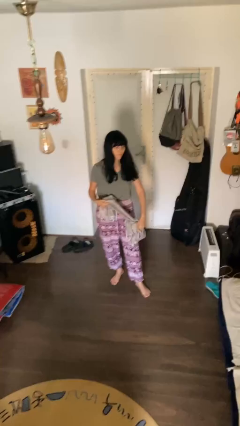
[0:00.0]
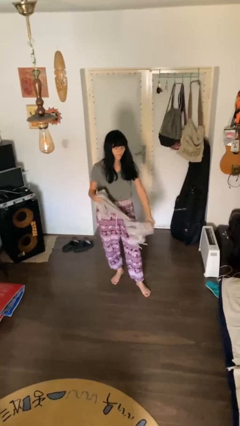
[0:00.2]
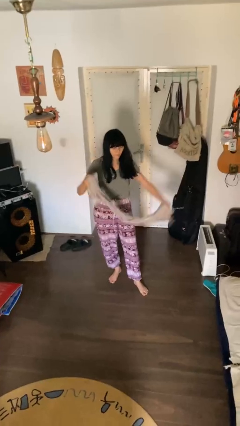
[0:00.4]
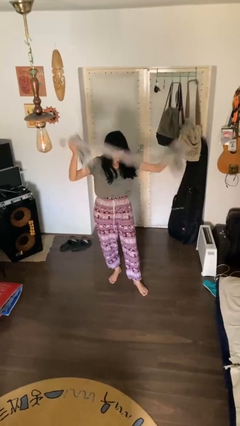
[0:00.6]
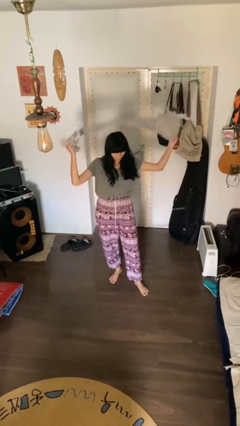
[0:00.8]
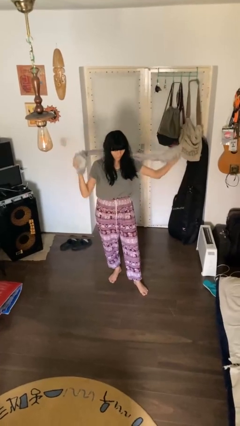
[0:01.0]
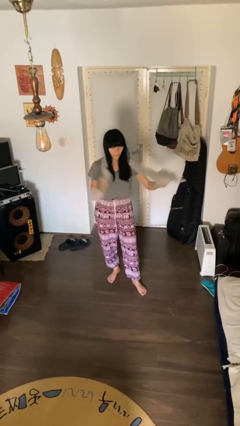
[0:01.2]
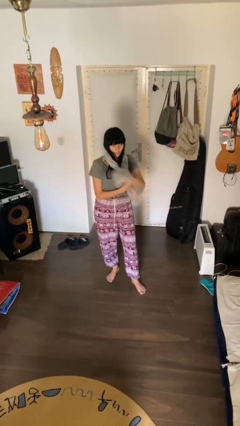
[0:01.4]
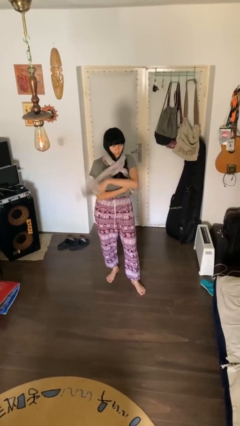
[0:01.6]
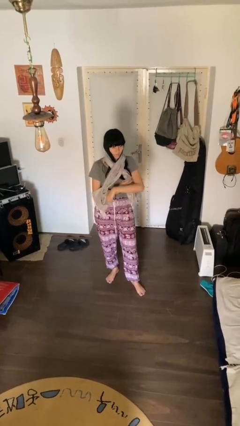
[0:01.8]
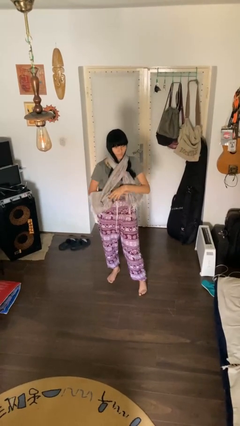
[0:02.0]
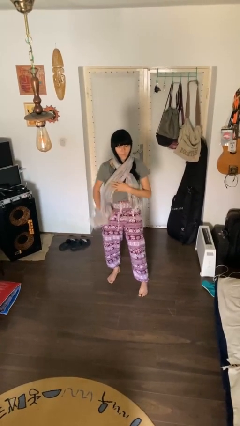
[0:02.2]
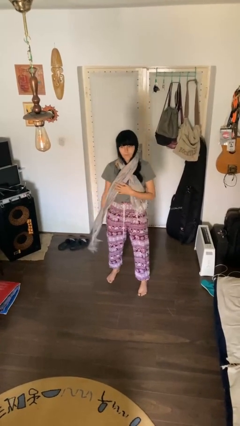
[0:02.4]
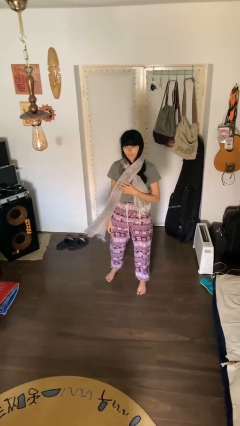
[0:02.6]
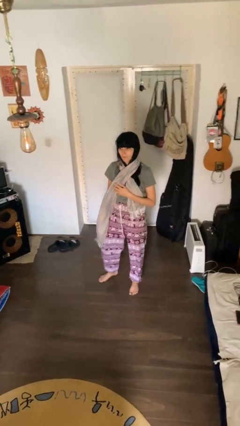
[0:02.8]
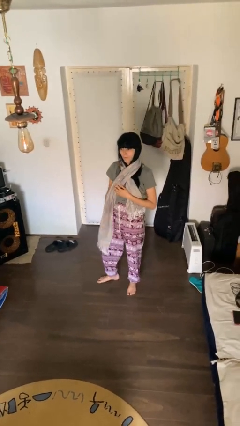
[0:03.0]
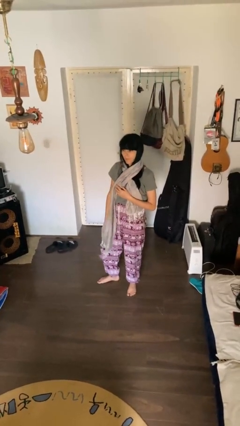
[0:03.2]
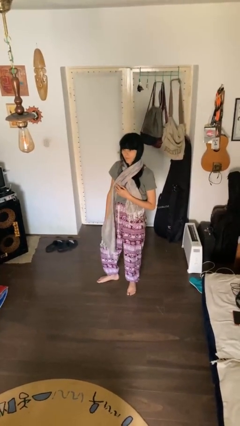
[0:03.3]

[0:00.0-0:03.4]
person puts on scarf

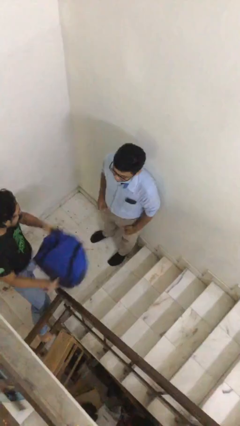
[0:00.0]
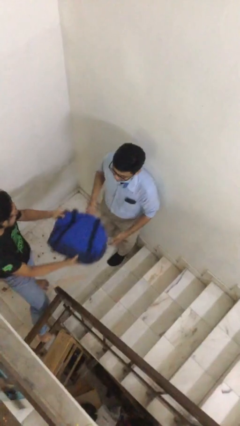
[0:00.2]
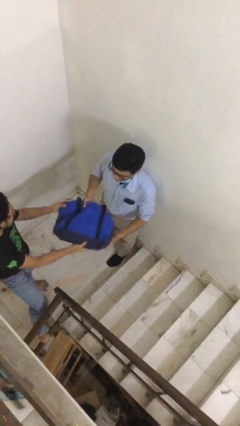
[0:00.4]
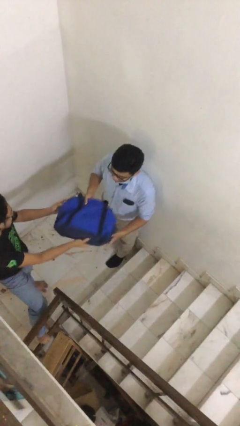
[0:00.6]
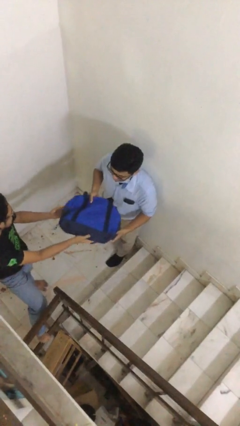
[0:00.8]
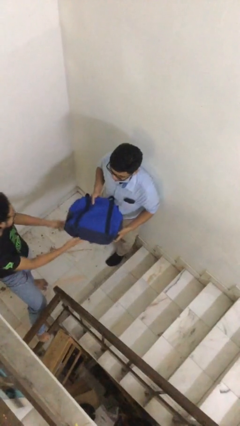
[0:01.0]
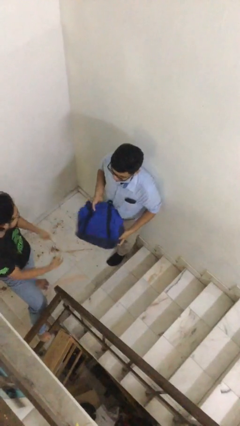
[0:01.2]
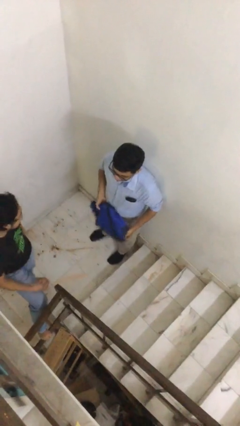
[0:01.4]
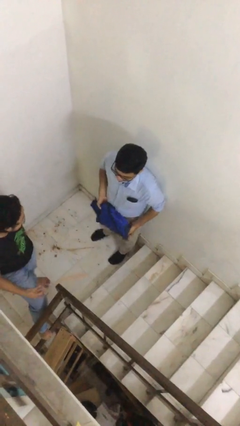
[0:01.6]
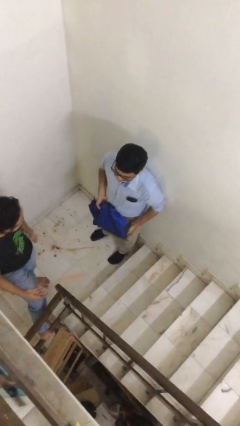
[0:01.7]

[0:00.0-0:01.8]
person transfers object to person

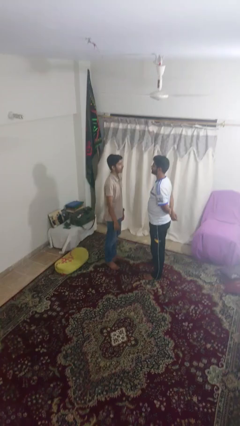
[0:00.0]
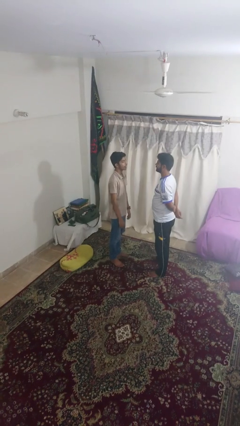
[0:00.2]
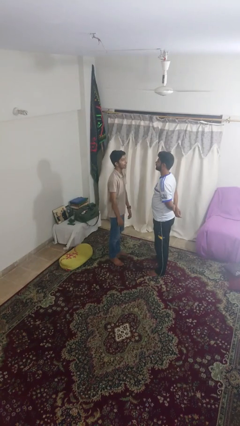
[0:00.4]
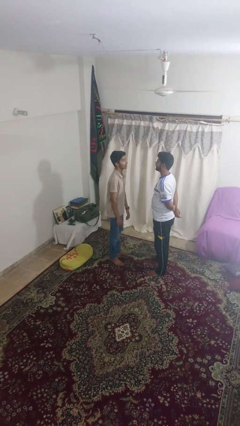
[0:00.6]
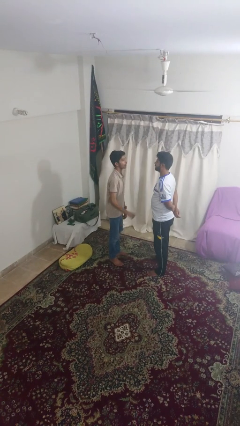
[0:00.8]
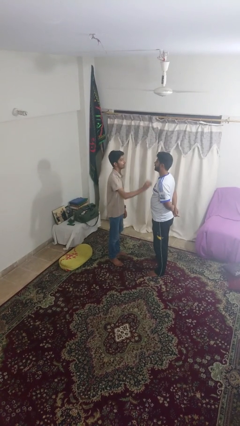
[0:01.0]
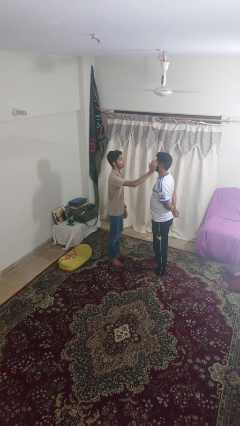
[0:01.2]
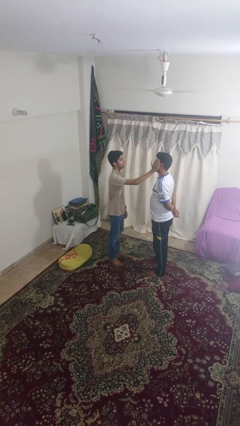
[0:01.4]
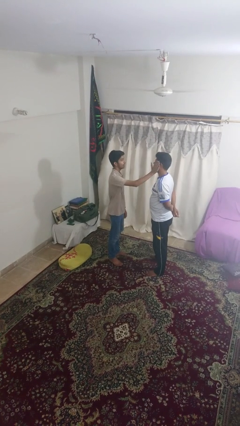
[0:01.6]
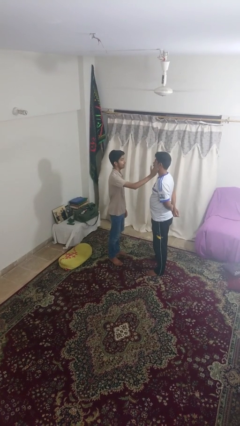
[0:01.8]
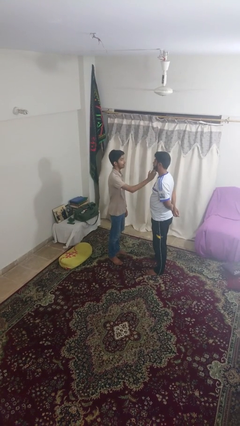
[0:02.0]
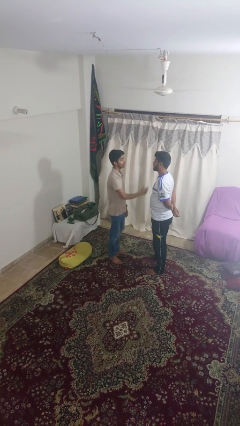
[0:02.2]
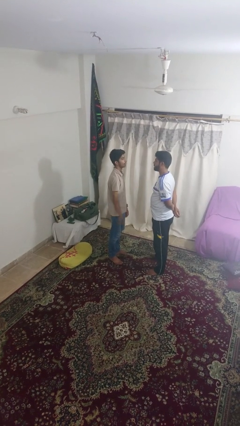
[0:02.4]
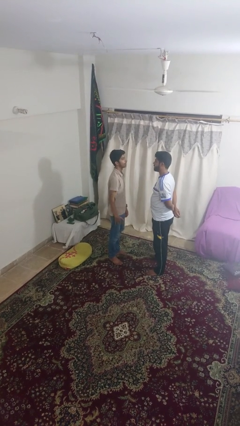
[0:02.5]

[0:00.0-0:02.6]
person touches face of person

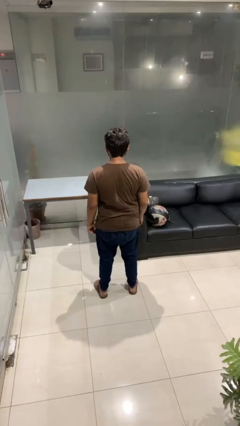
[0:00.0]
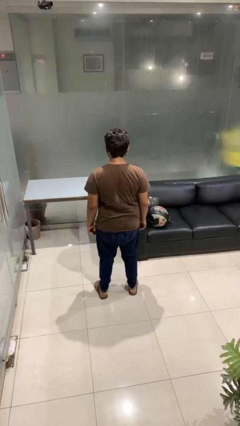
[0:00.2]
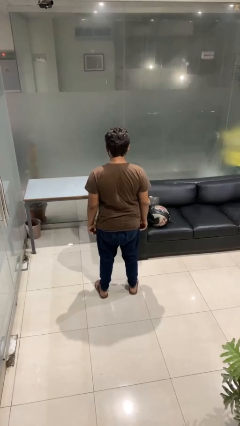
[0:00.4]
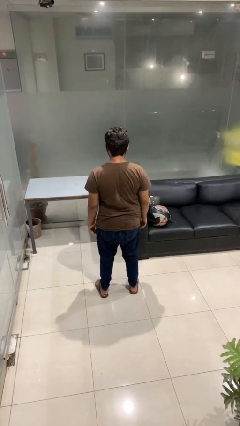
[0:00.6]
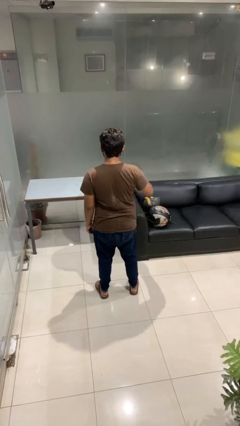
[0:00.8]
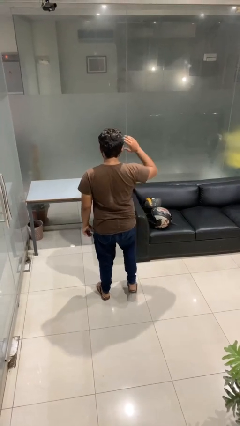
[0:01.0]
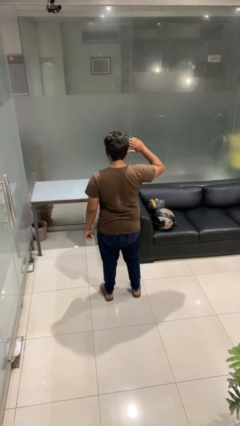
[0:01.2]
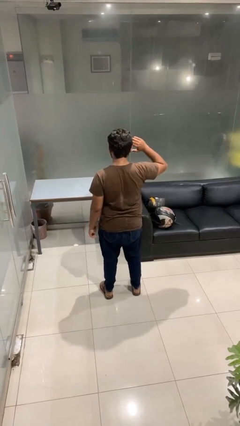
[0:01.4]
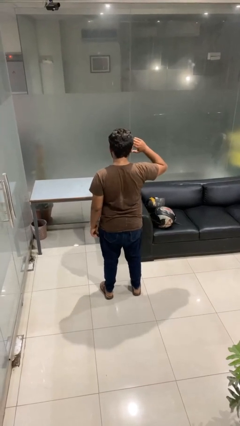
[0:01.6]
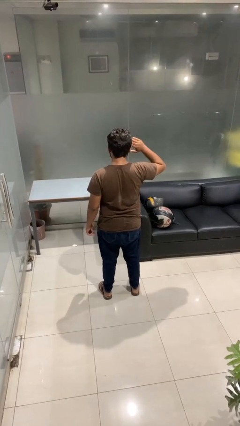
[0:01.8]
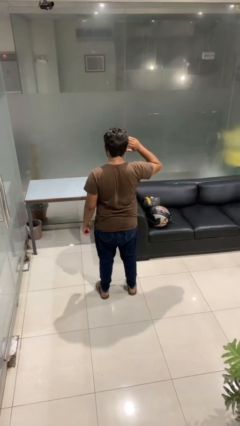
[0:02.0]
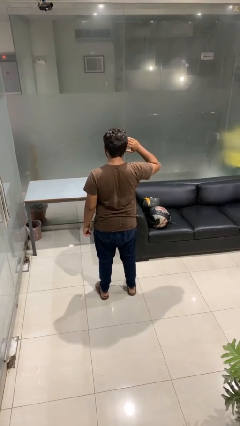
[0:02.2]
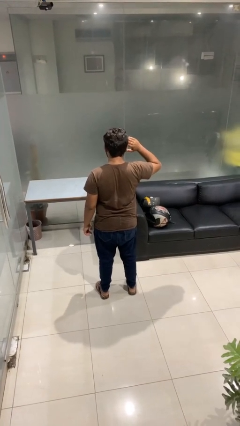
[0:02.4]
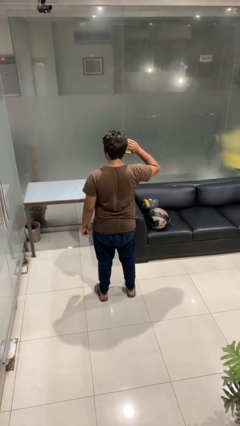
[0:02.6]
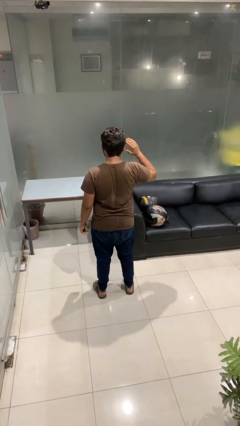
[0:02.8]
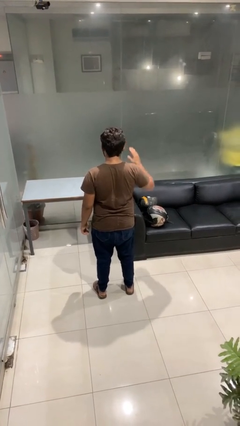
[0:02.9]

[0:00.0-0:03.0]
person salutes

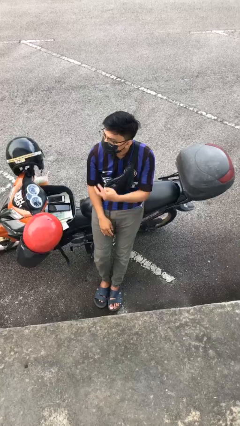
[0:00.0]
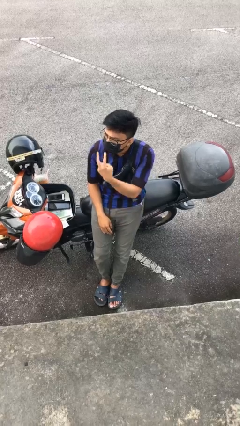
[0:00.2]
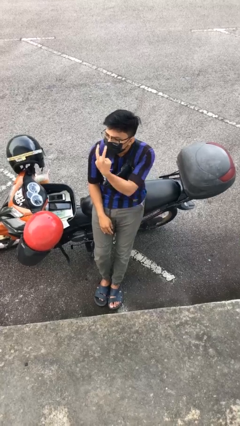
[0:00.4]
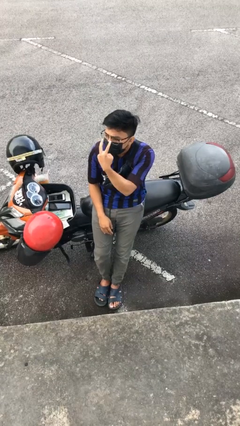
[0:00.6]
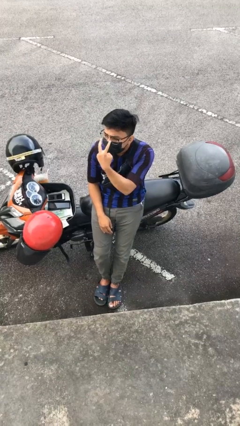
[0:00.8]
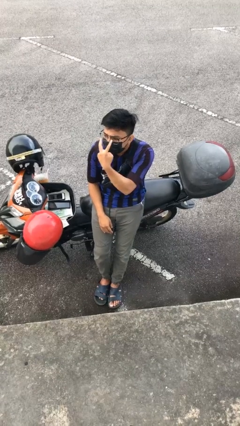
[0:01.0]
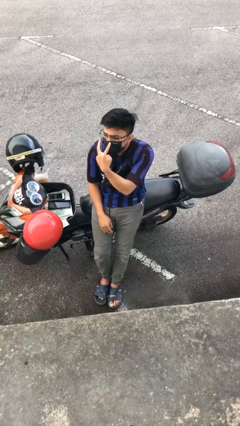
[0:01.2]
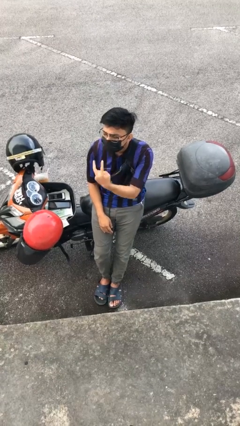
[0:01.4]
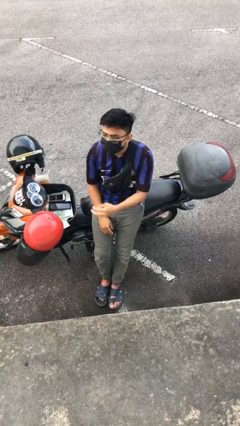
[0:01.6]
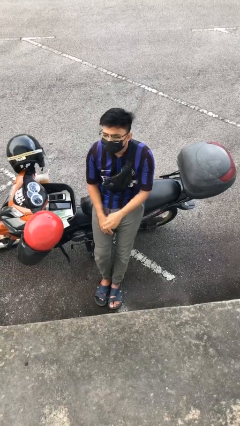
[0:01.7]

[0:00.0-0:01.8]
person gestures watch closely

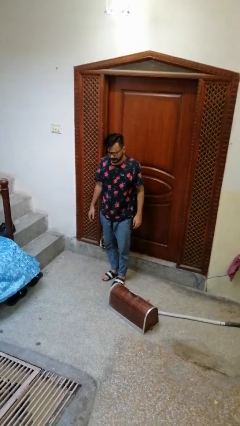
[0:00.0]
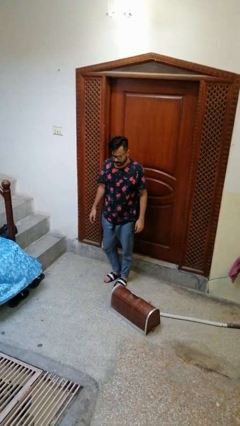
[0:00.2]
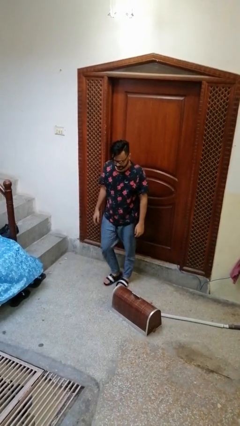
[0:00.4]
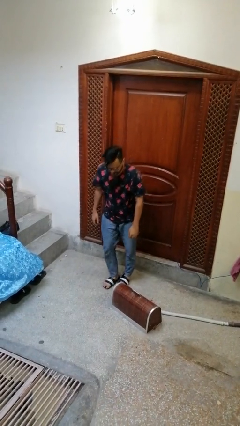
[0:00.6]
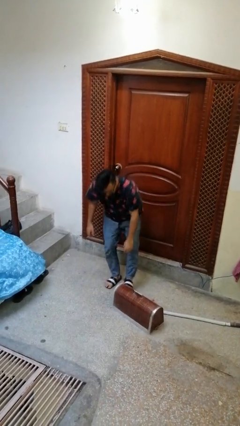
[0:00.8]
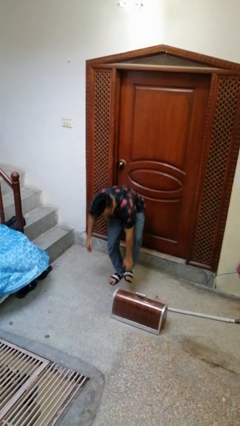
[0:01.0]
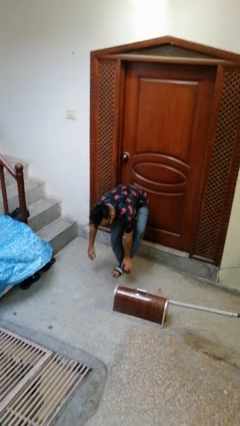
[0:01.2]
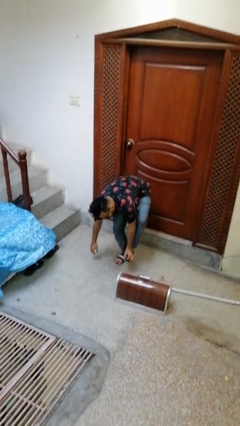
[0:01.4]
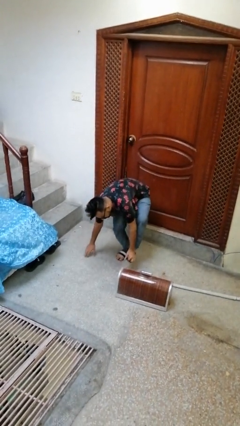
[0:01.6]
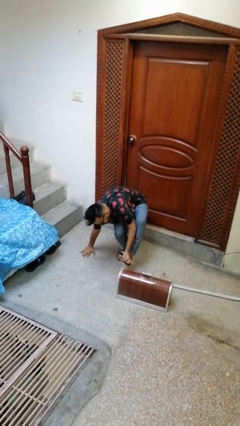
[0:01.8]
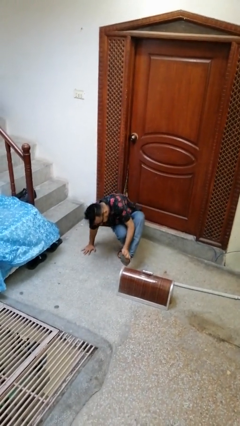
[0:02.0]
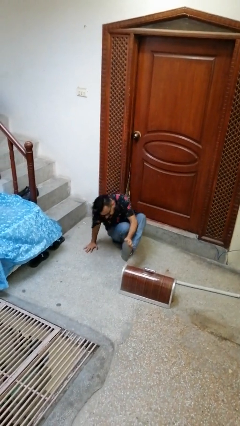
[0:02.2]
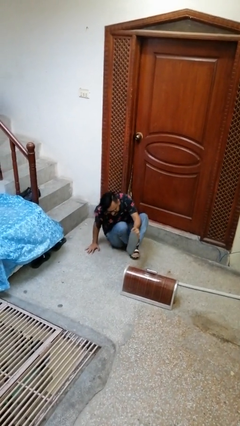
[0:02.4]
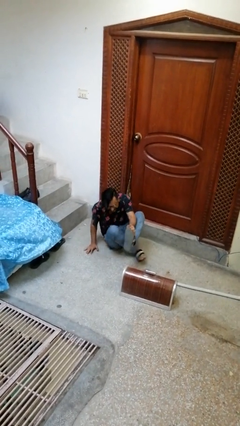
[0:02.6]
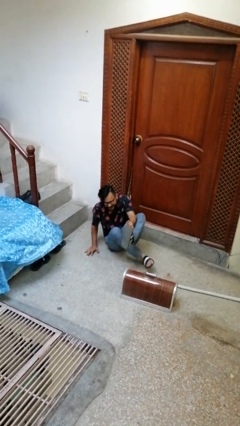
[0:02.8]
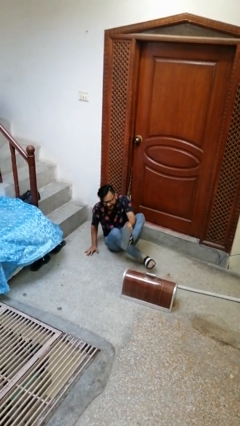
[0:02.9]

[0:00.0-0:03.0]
person trips on object on floor

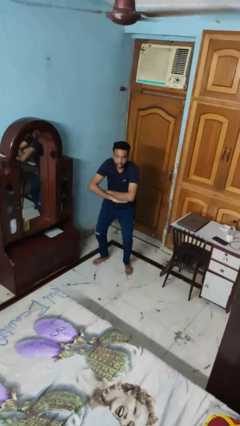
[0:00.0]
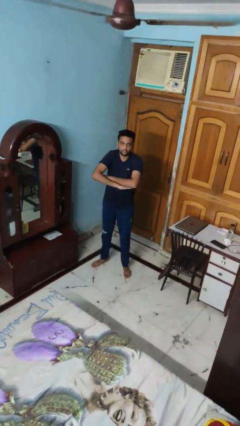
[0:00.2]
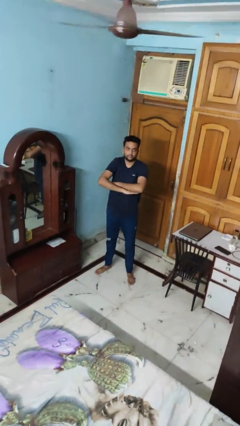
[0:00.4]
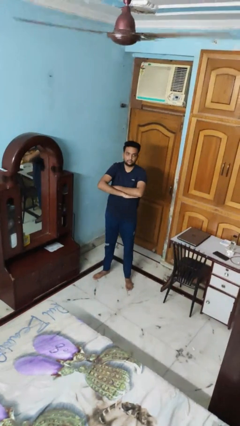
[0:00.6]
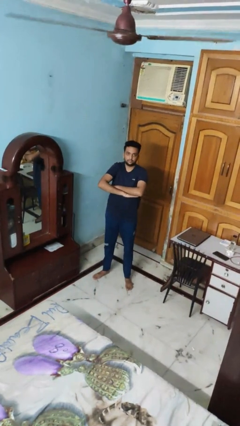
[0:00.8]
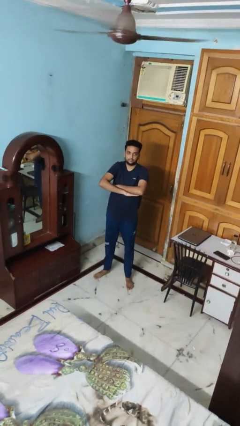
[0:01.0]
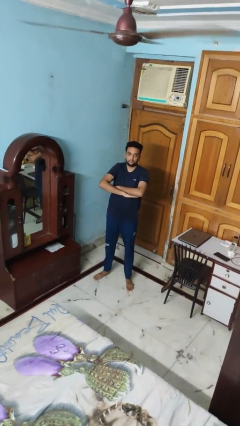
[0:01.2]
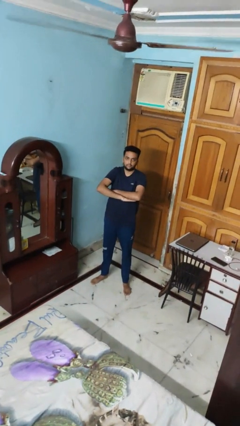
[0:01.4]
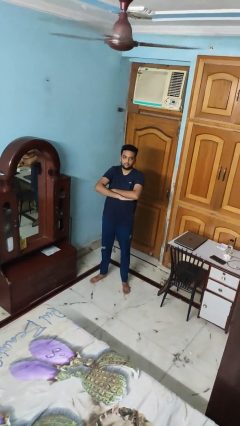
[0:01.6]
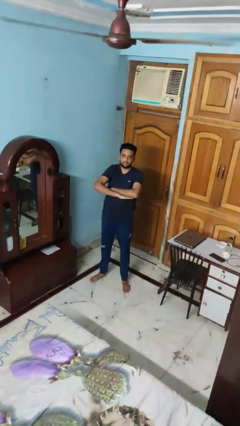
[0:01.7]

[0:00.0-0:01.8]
person stands up
